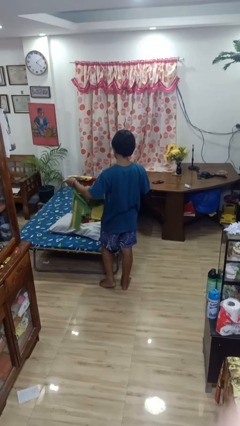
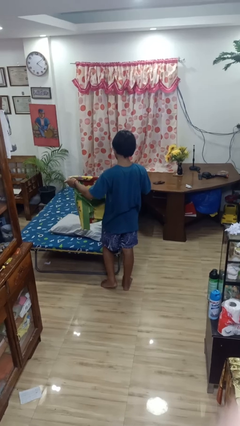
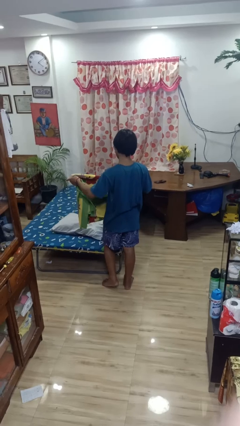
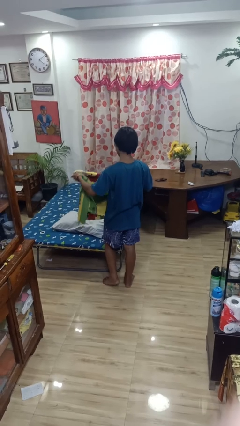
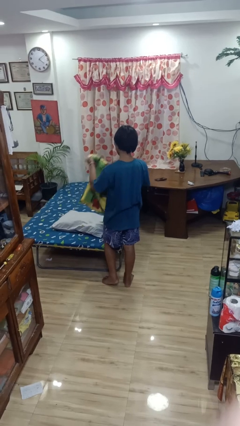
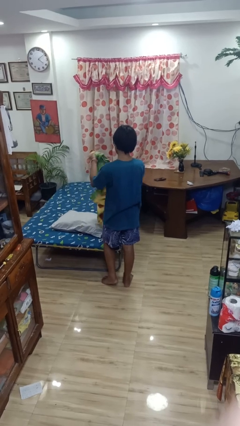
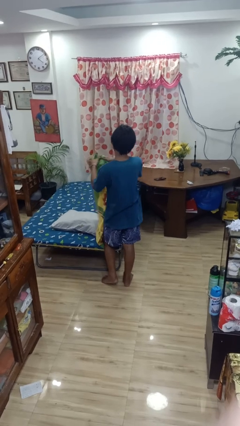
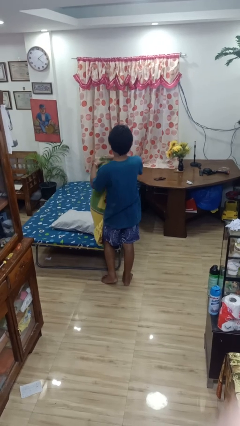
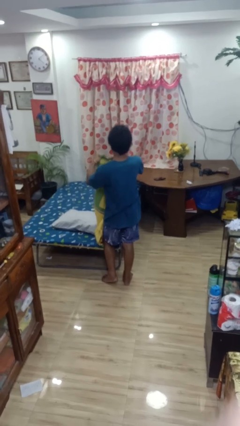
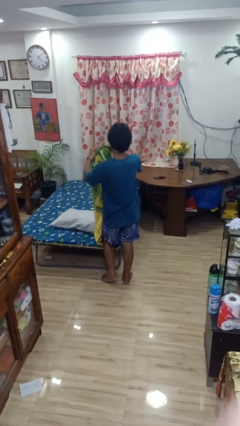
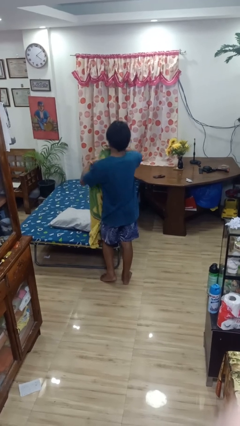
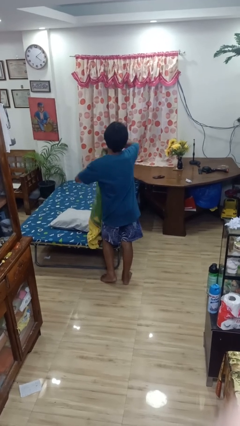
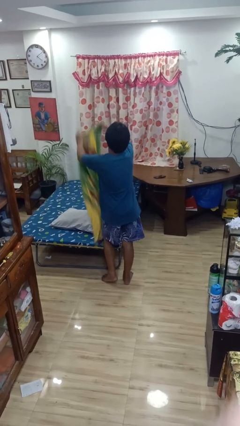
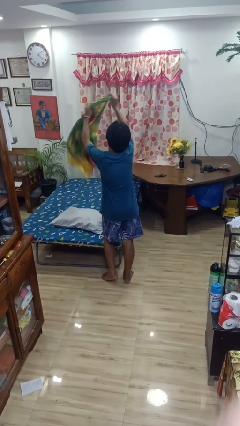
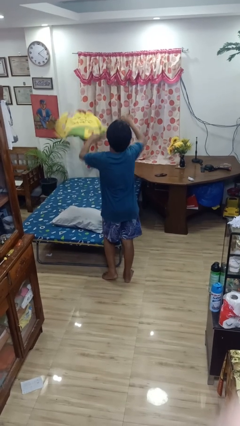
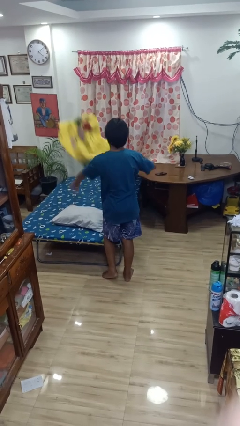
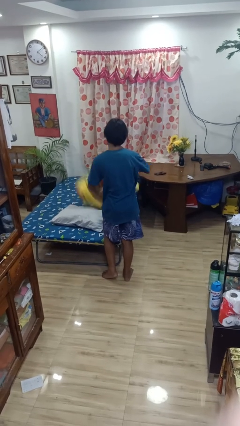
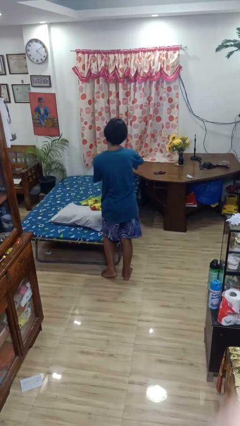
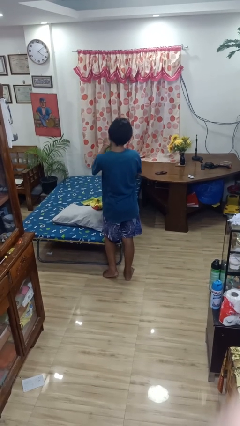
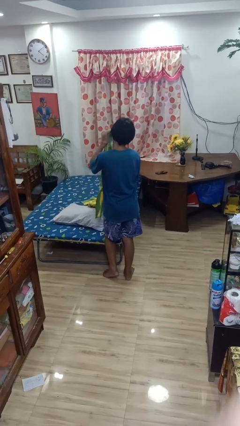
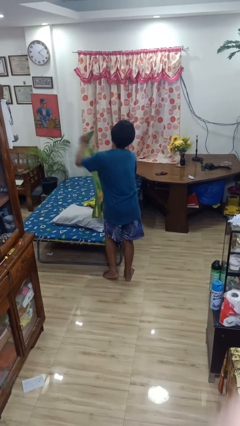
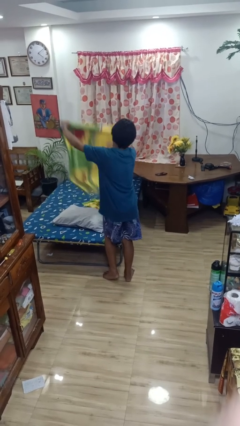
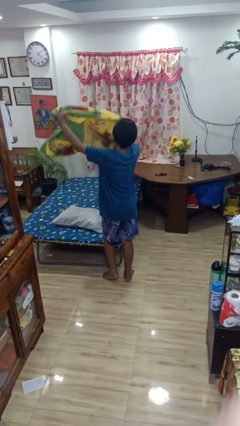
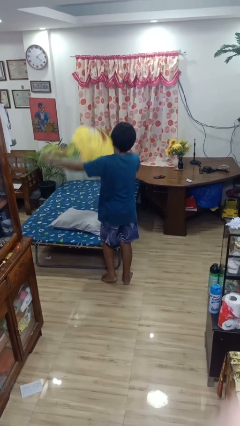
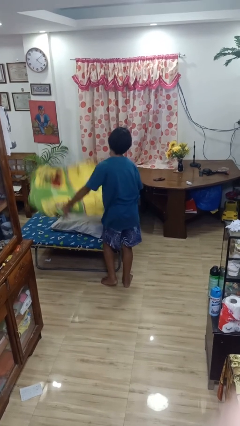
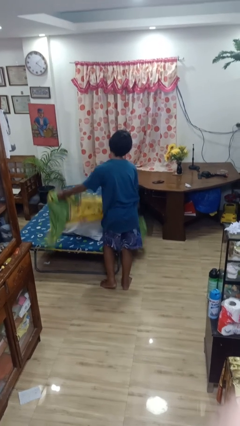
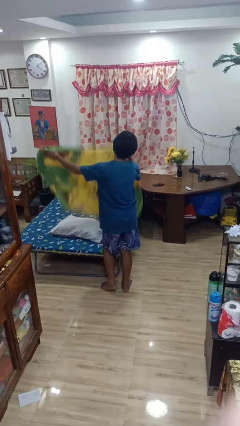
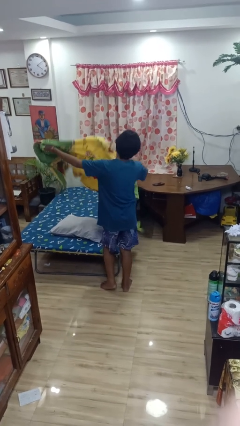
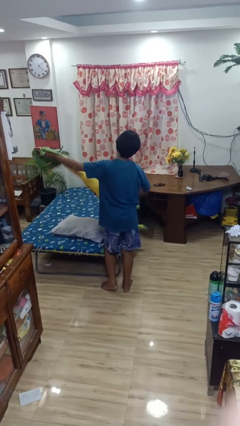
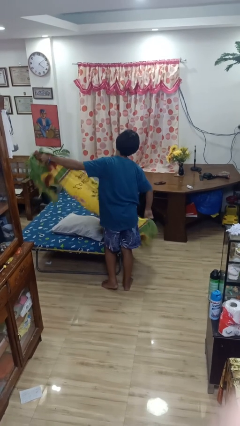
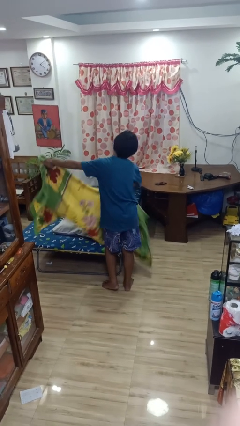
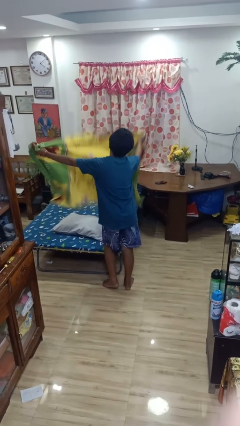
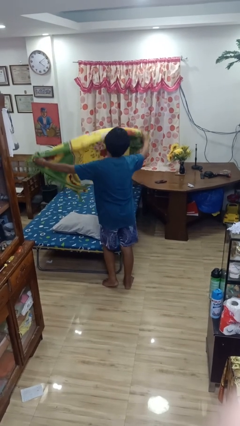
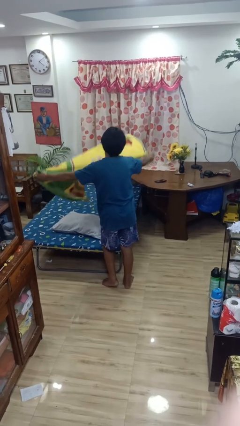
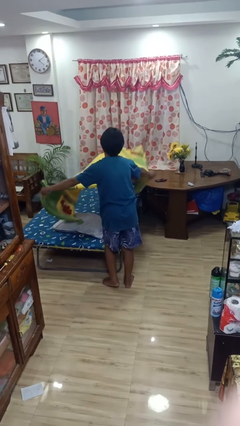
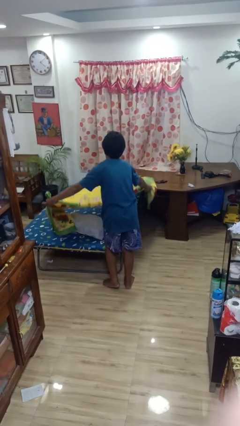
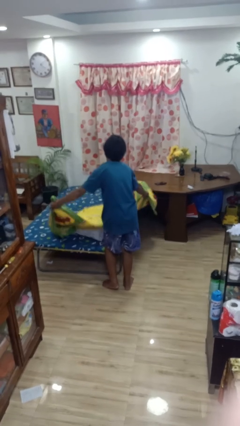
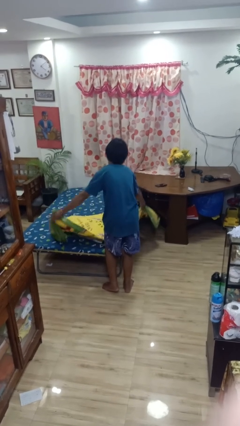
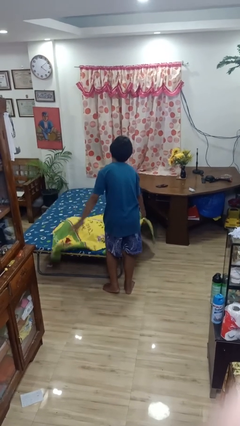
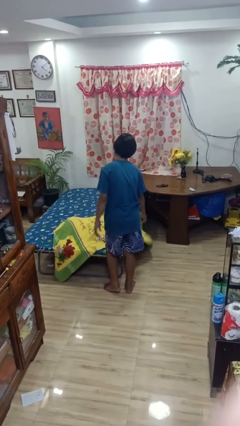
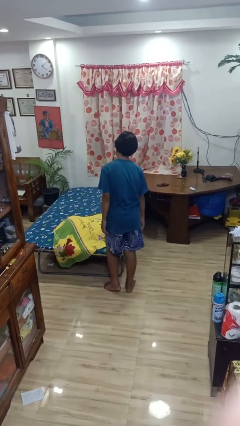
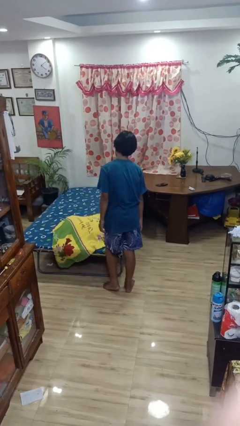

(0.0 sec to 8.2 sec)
person unfolds blanket

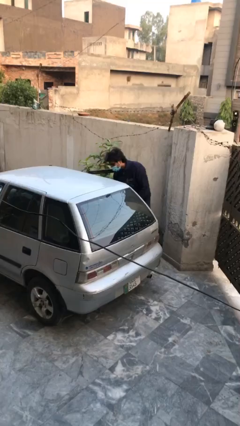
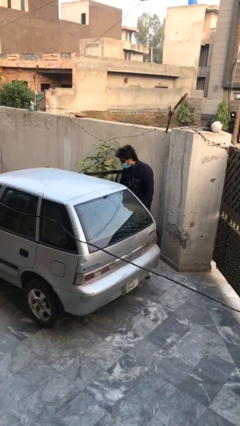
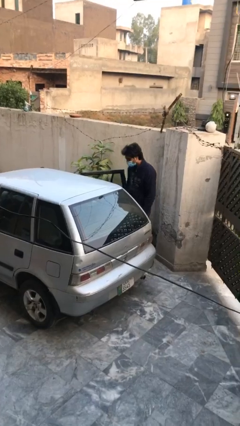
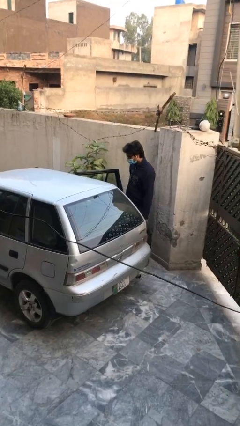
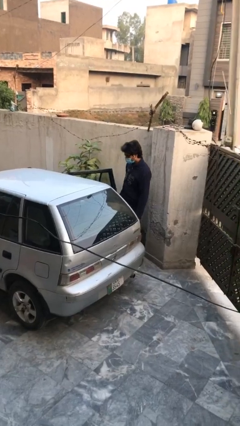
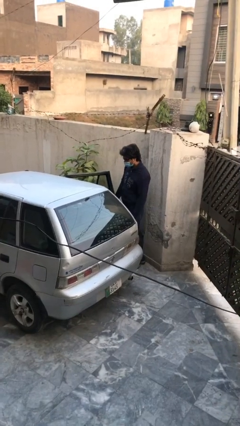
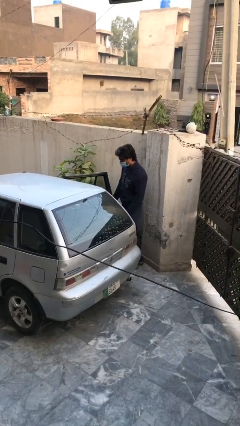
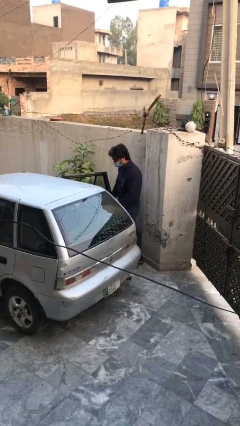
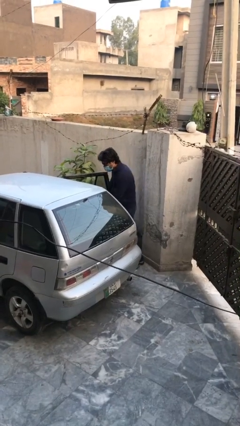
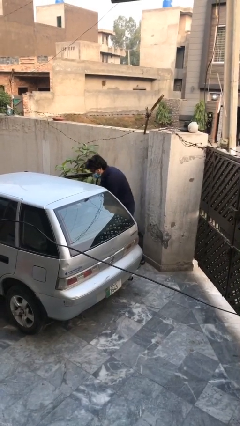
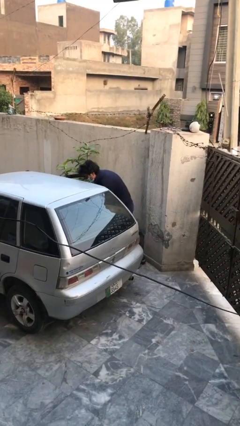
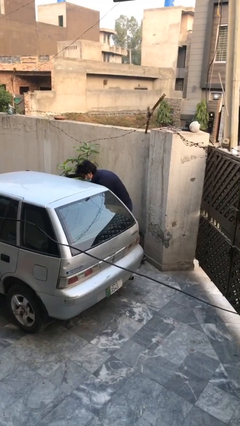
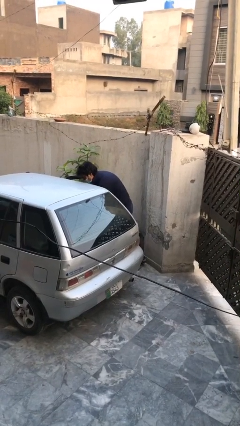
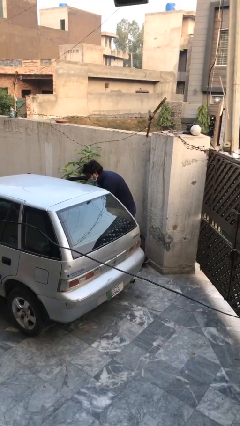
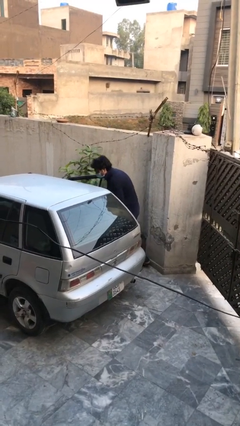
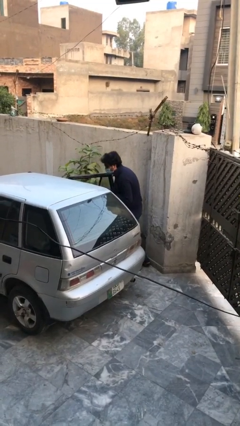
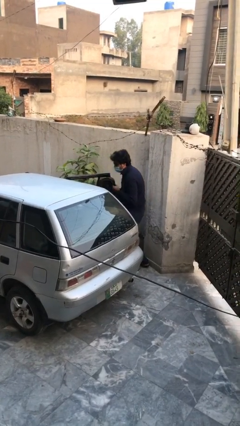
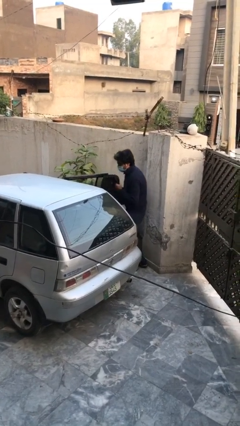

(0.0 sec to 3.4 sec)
person unloads car

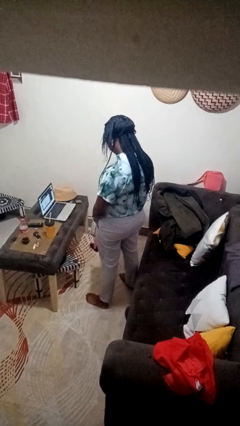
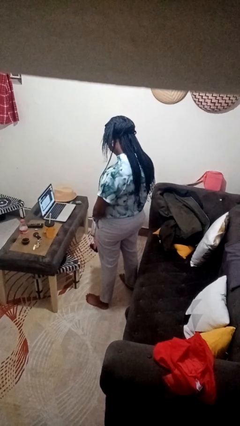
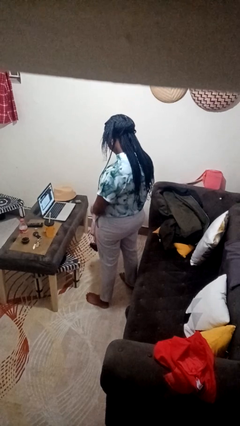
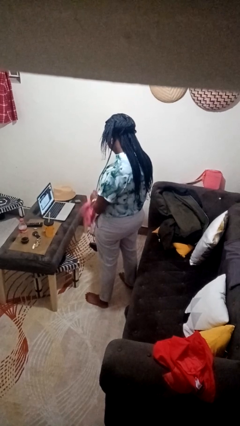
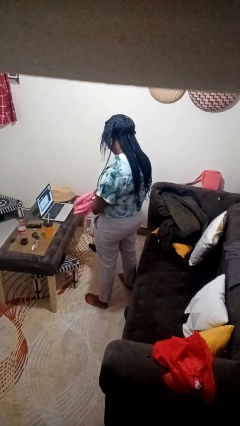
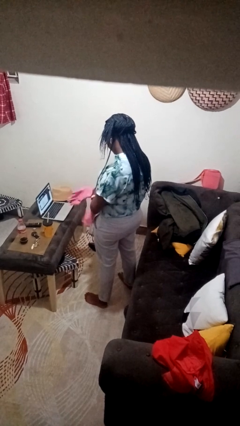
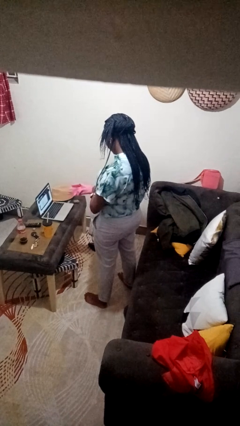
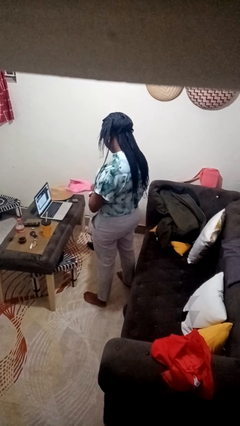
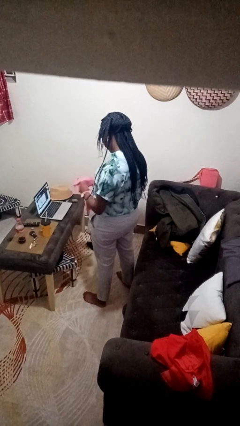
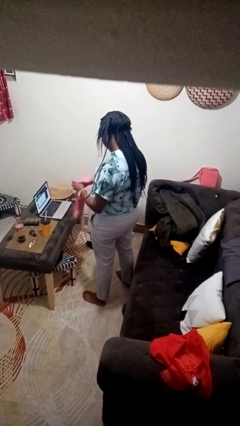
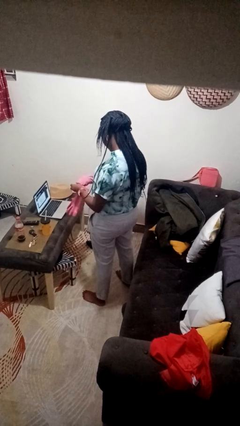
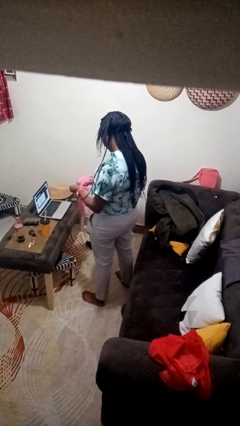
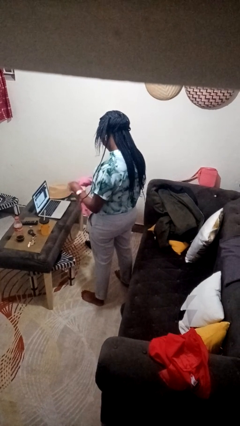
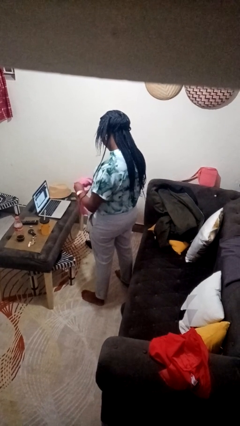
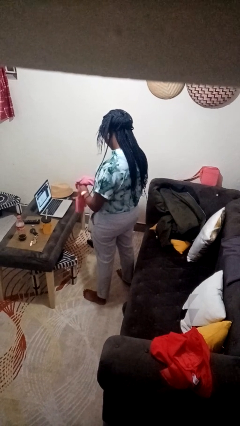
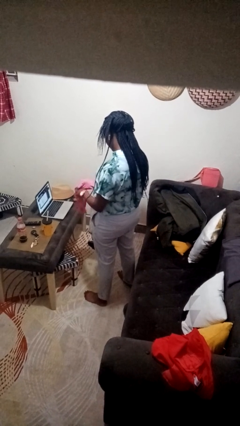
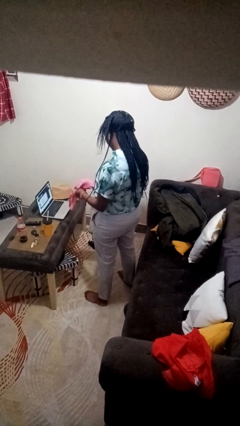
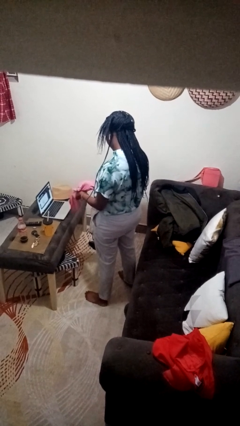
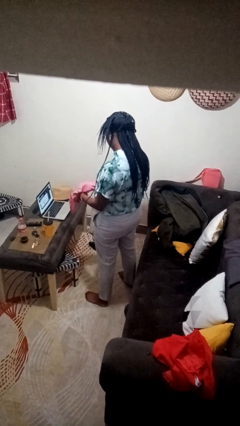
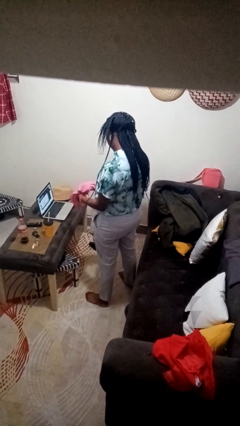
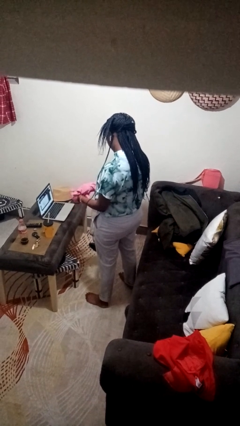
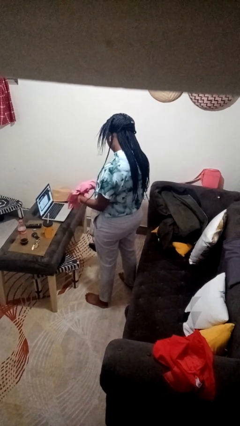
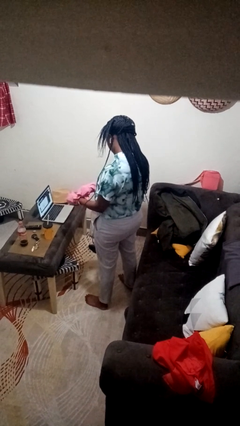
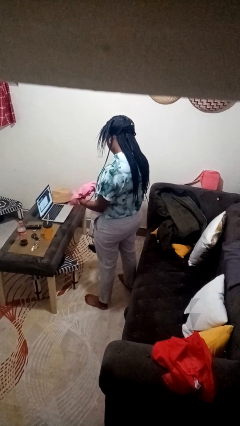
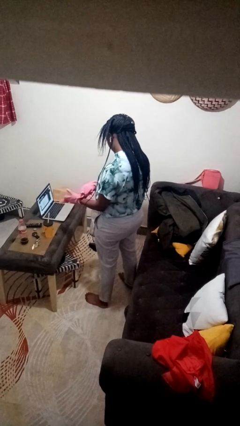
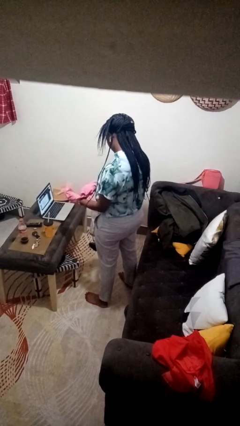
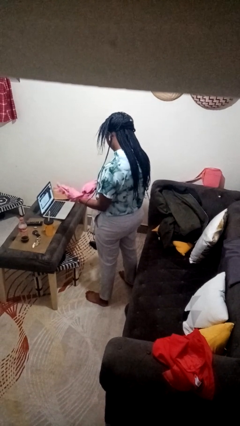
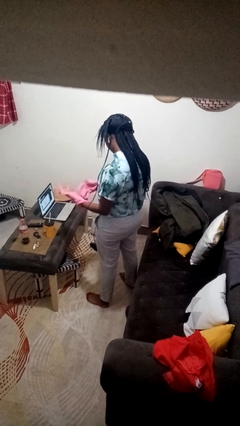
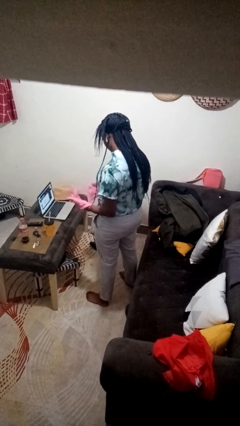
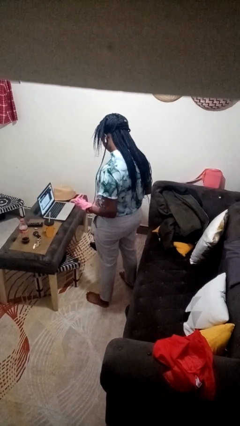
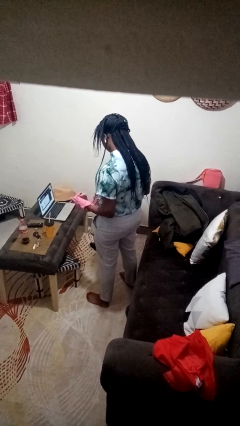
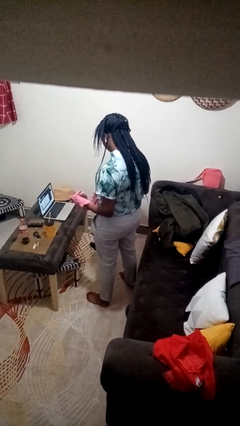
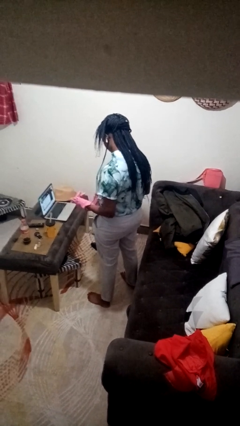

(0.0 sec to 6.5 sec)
person puts on gloves
